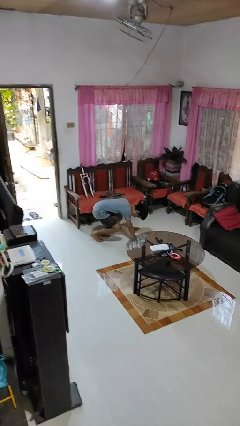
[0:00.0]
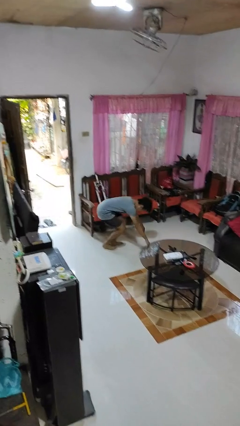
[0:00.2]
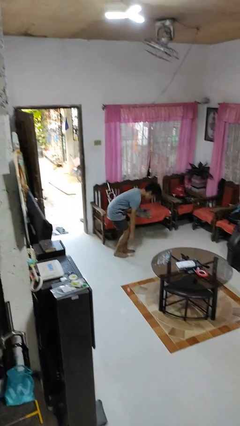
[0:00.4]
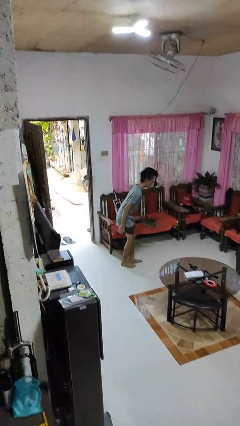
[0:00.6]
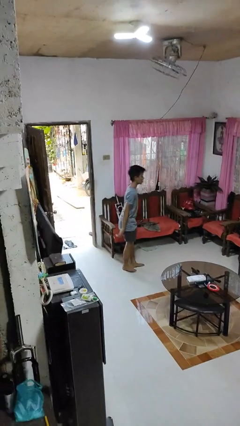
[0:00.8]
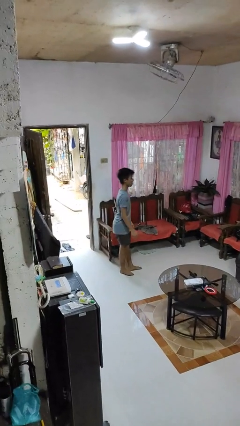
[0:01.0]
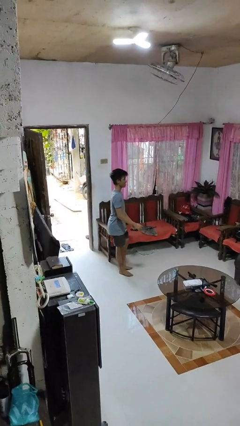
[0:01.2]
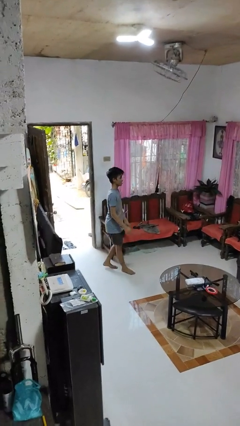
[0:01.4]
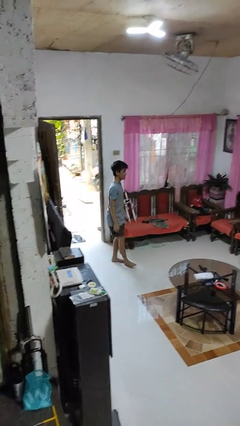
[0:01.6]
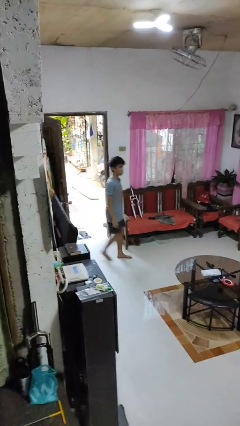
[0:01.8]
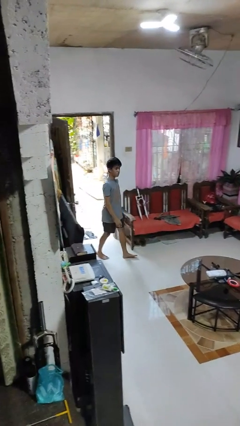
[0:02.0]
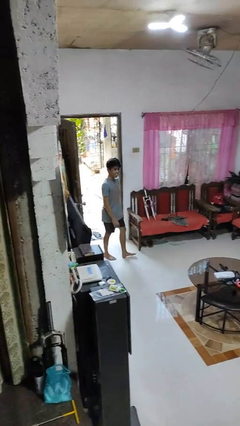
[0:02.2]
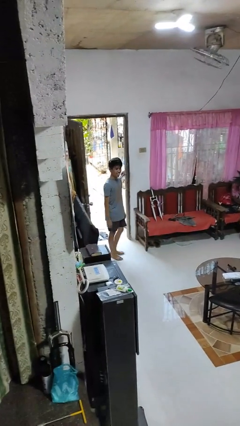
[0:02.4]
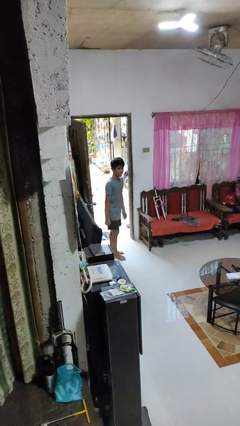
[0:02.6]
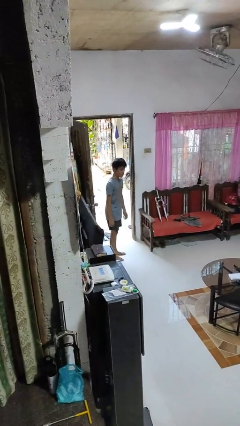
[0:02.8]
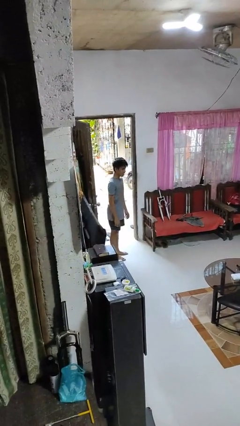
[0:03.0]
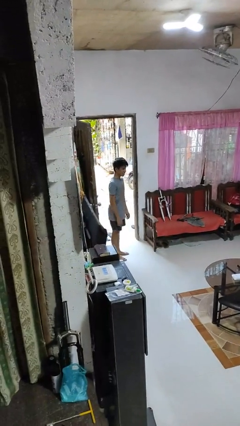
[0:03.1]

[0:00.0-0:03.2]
person stands up from floor

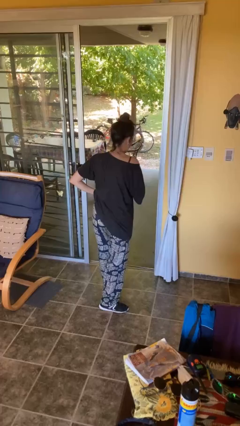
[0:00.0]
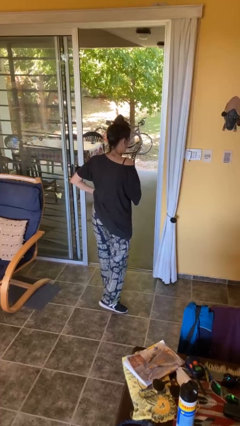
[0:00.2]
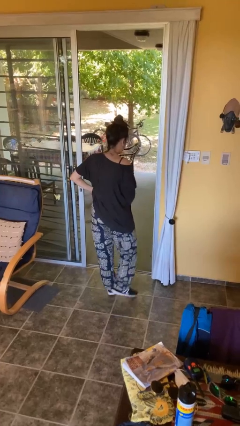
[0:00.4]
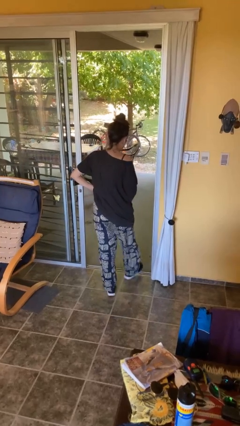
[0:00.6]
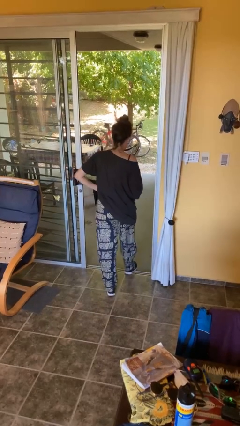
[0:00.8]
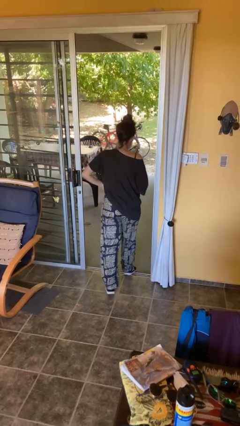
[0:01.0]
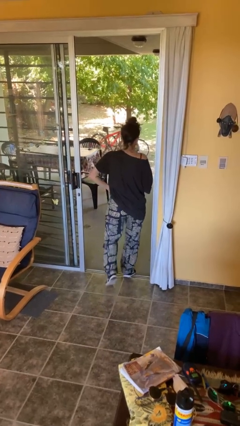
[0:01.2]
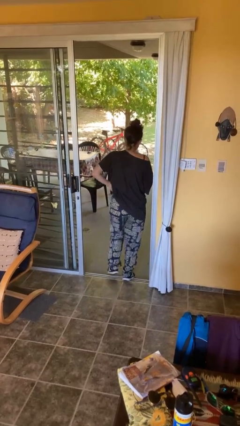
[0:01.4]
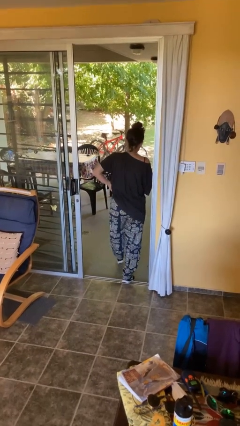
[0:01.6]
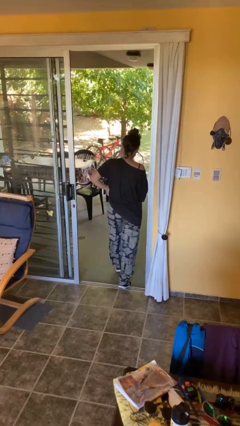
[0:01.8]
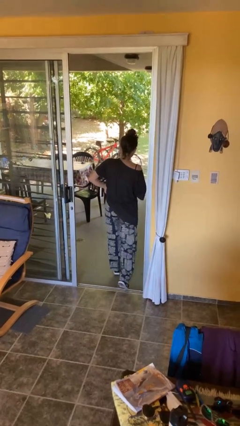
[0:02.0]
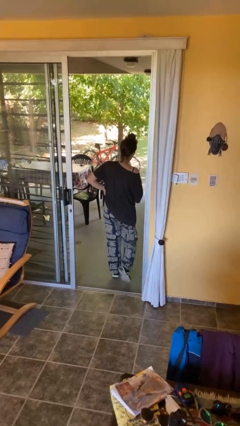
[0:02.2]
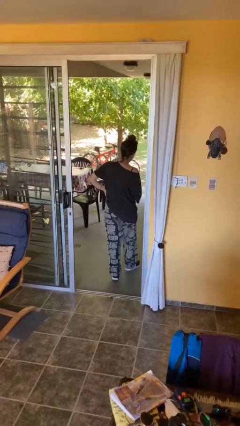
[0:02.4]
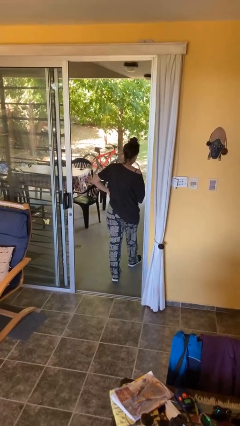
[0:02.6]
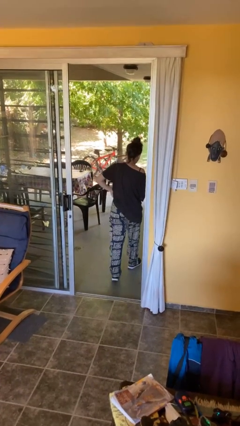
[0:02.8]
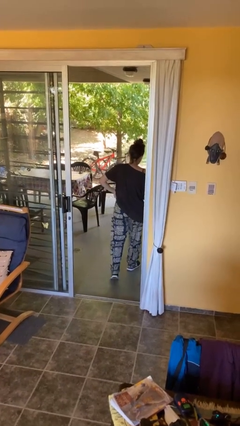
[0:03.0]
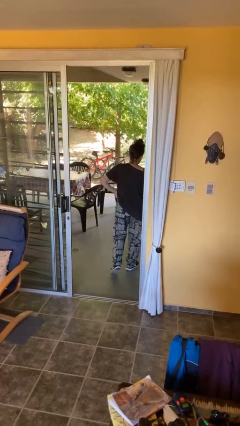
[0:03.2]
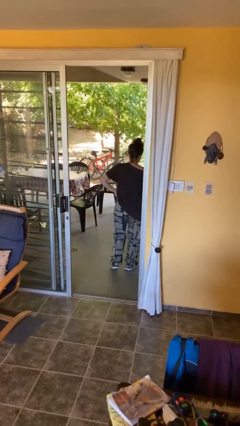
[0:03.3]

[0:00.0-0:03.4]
person exits scene through structure

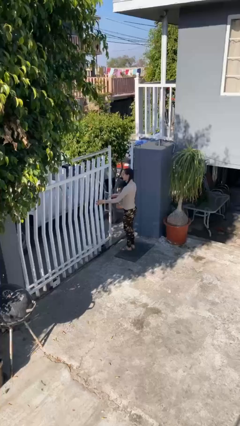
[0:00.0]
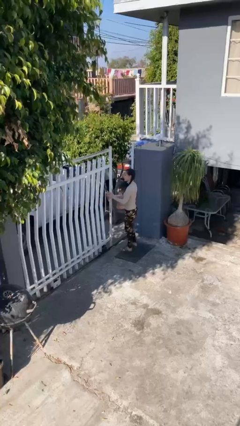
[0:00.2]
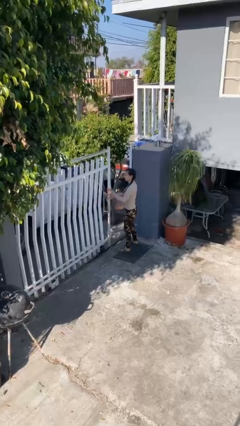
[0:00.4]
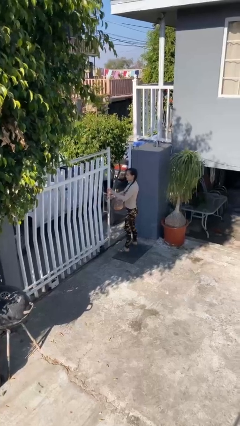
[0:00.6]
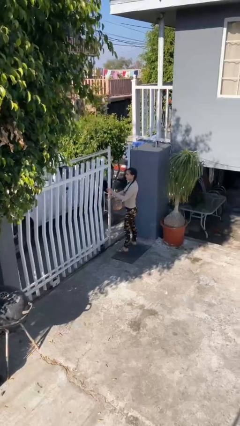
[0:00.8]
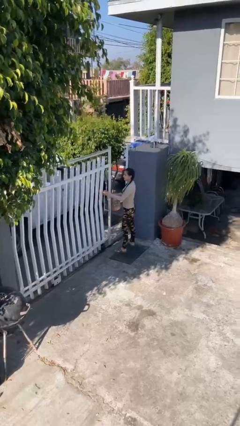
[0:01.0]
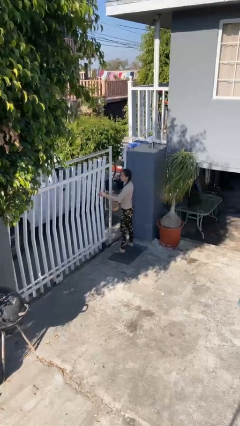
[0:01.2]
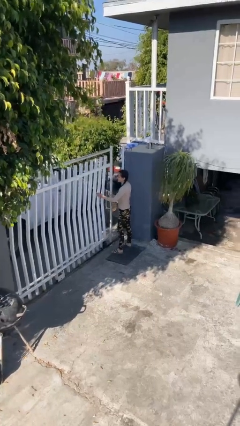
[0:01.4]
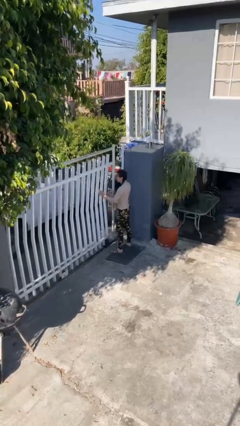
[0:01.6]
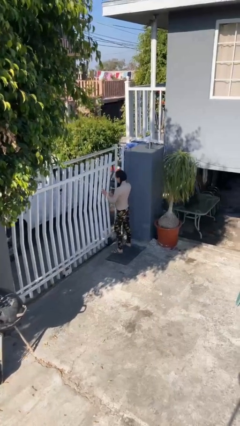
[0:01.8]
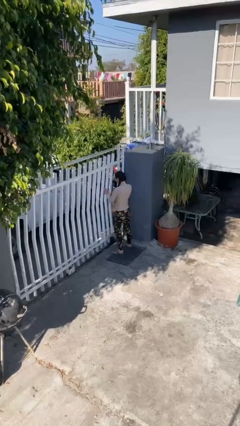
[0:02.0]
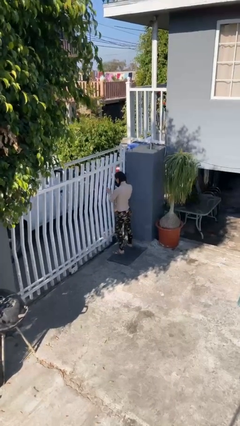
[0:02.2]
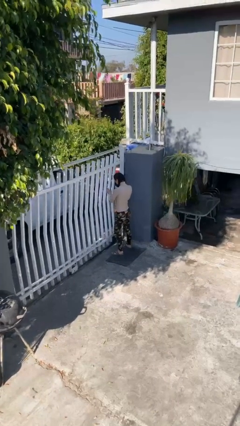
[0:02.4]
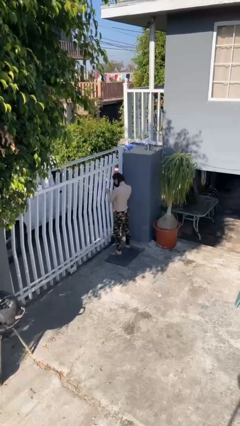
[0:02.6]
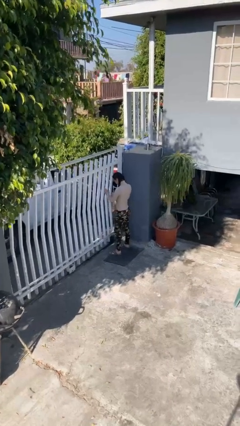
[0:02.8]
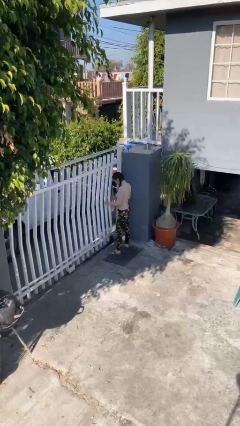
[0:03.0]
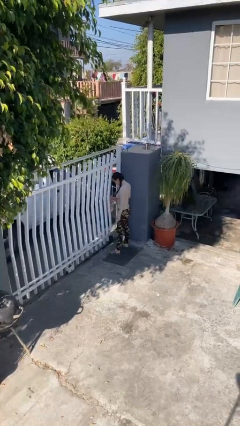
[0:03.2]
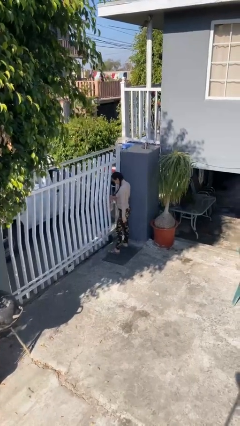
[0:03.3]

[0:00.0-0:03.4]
person closes facility door

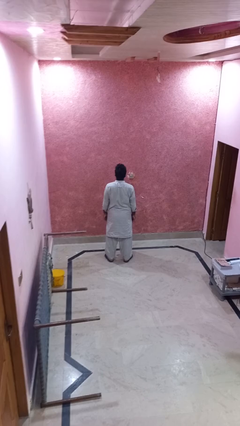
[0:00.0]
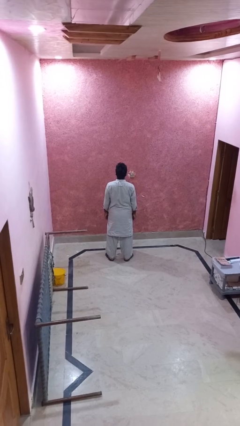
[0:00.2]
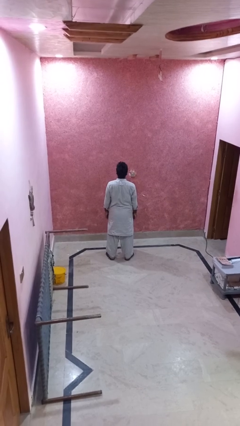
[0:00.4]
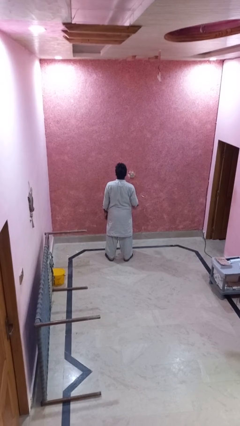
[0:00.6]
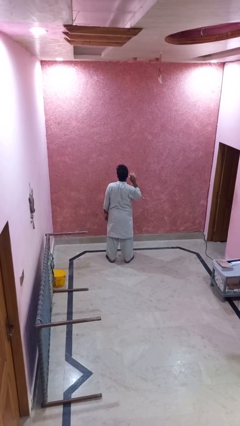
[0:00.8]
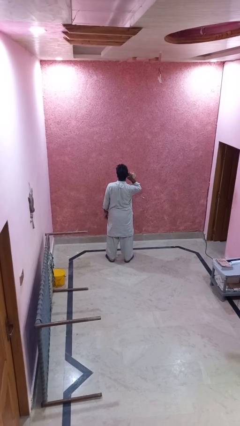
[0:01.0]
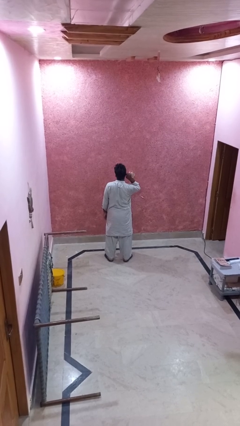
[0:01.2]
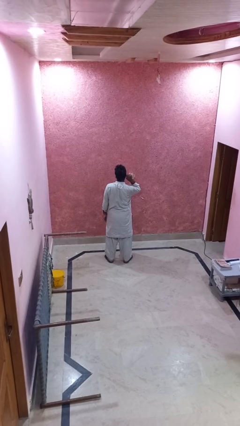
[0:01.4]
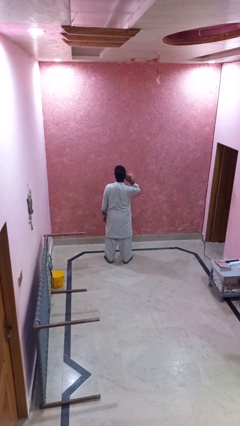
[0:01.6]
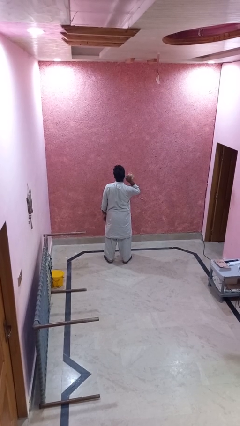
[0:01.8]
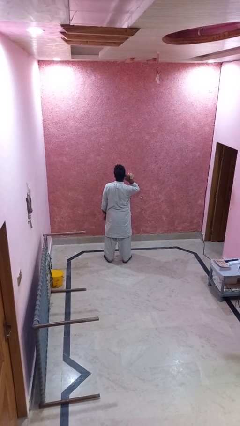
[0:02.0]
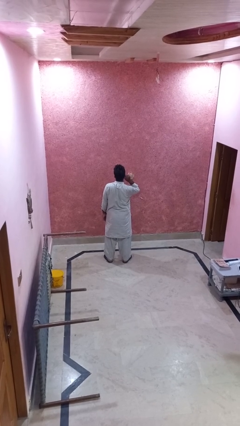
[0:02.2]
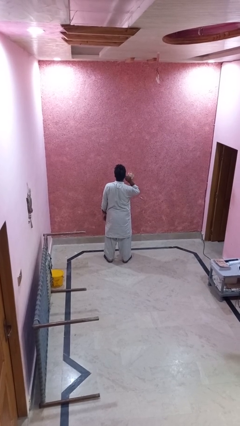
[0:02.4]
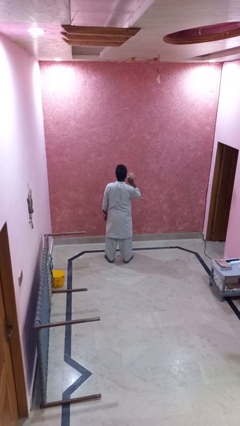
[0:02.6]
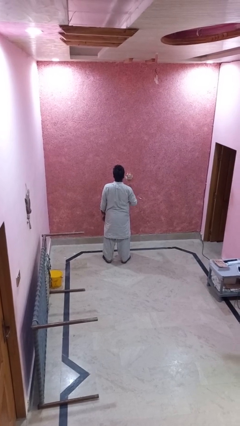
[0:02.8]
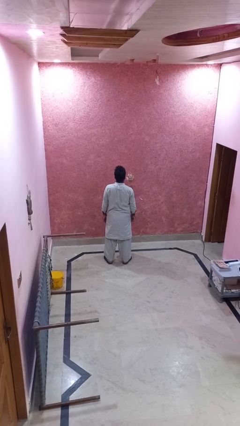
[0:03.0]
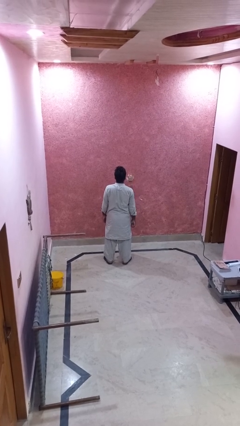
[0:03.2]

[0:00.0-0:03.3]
person touches earlobe

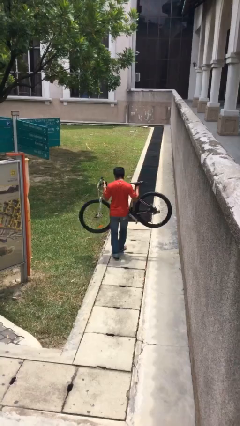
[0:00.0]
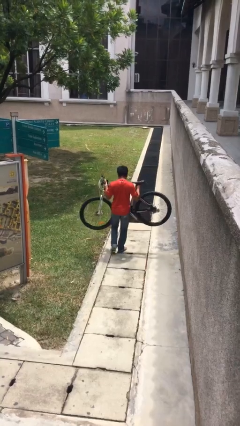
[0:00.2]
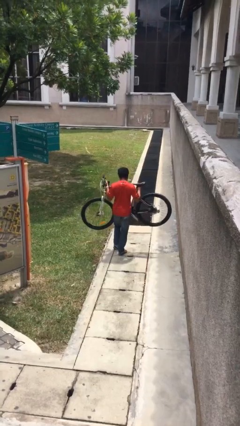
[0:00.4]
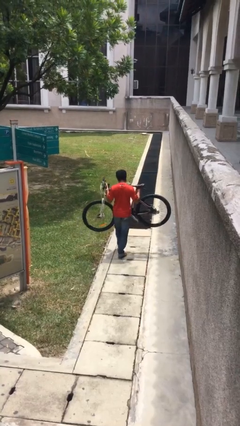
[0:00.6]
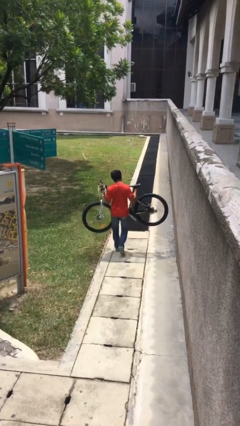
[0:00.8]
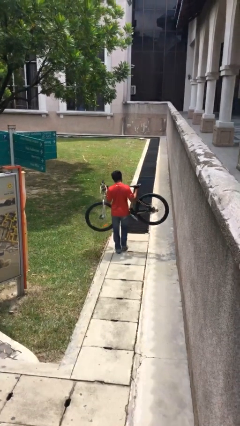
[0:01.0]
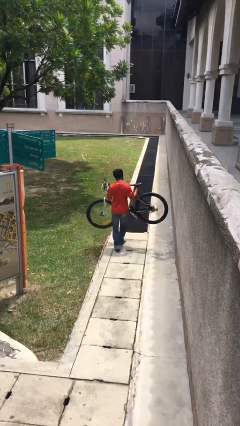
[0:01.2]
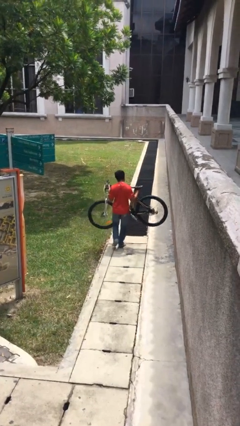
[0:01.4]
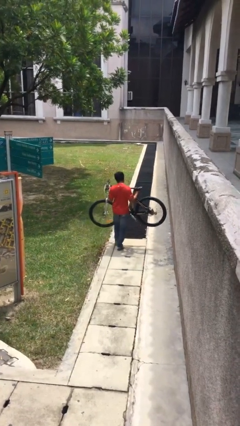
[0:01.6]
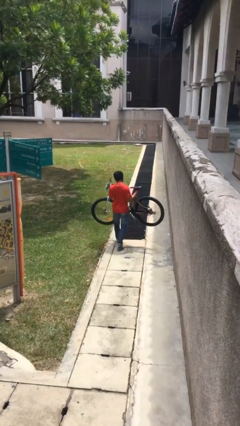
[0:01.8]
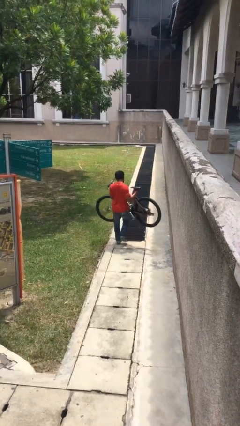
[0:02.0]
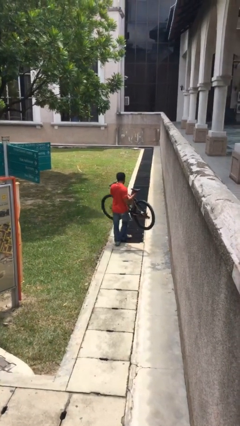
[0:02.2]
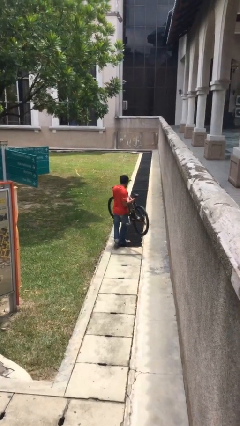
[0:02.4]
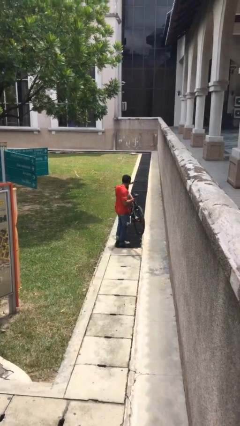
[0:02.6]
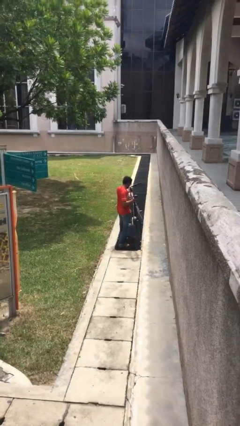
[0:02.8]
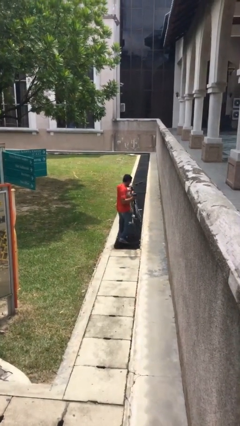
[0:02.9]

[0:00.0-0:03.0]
person carries heavy object

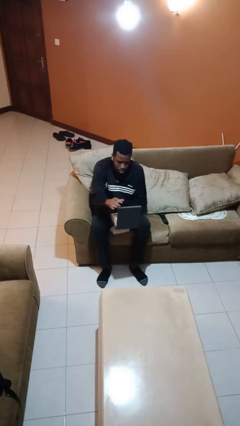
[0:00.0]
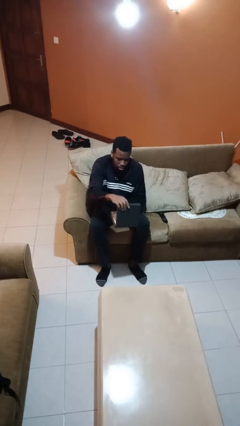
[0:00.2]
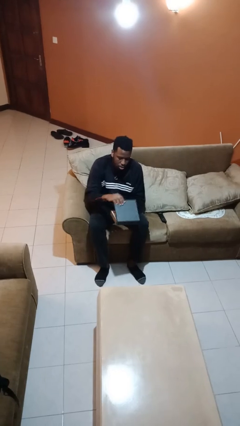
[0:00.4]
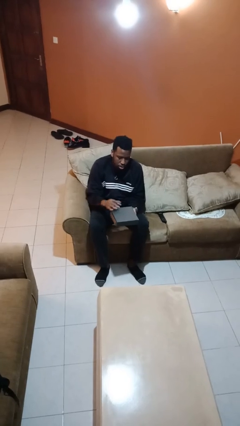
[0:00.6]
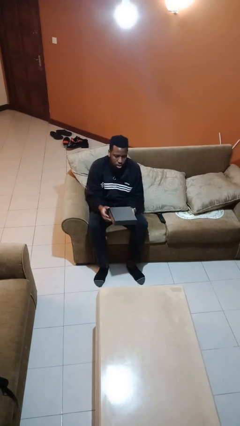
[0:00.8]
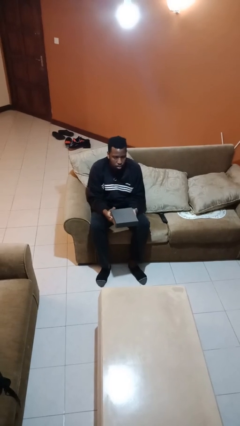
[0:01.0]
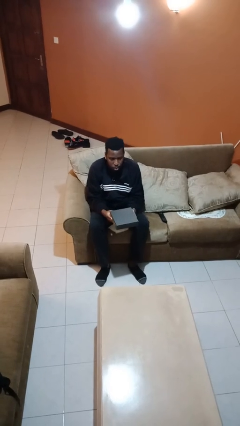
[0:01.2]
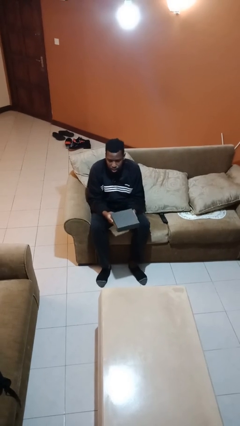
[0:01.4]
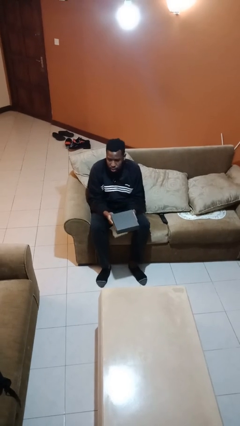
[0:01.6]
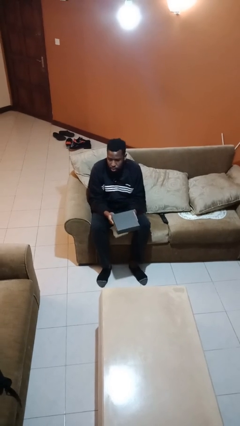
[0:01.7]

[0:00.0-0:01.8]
person closes jewelry box
